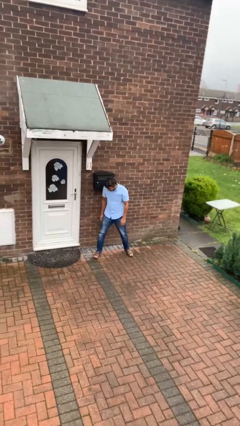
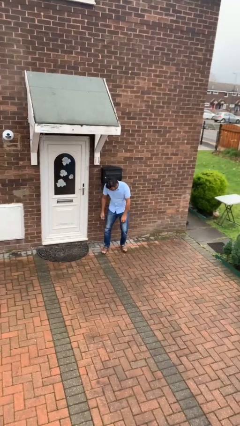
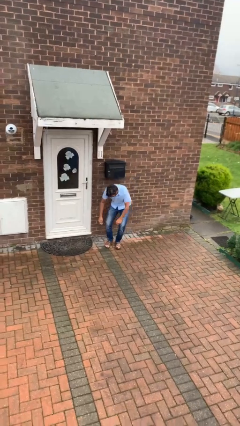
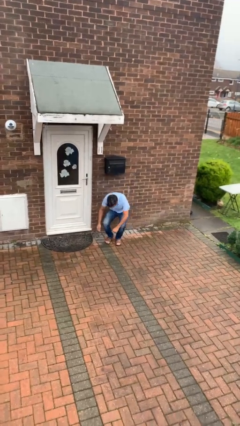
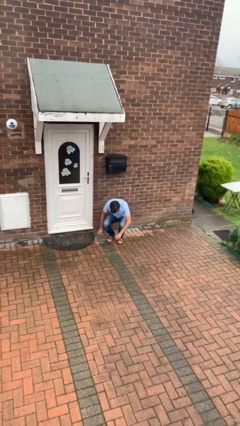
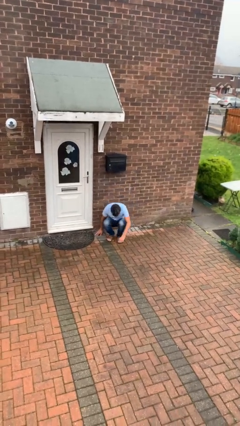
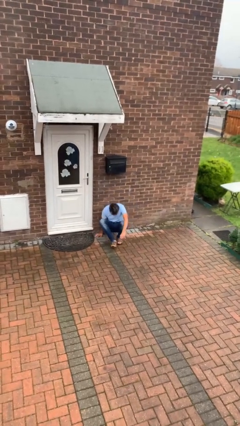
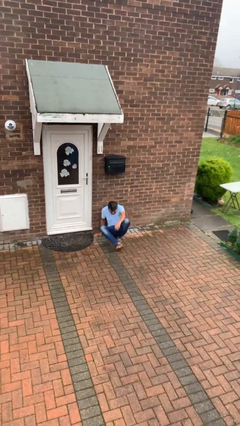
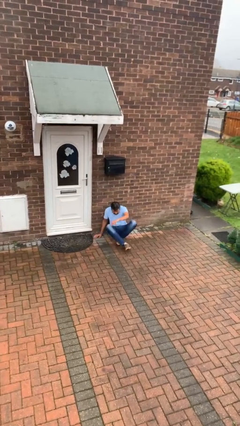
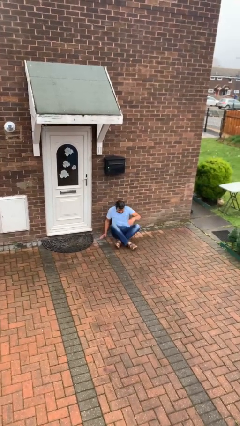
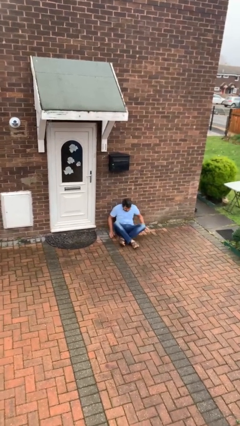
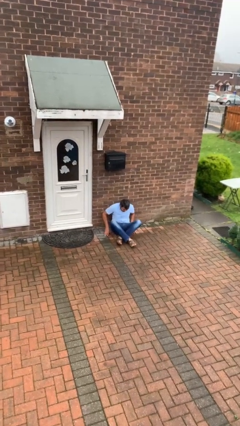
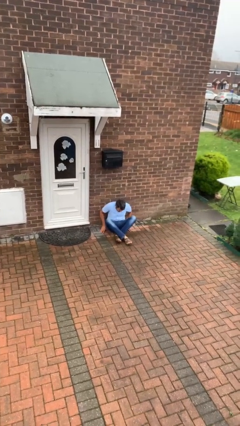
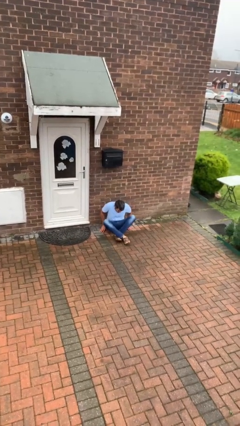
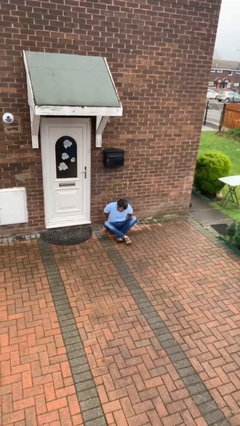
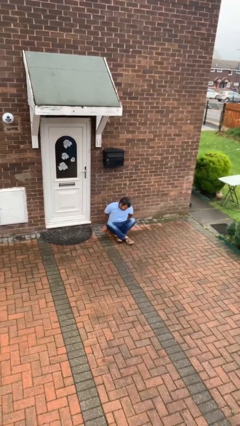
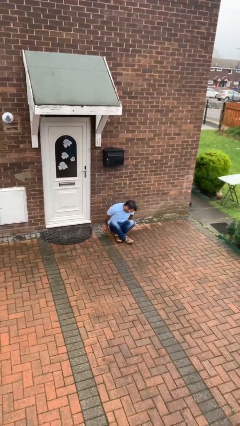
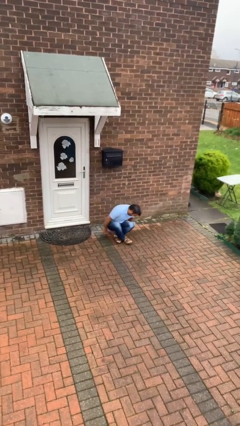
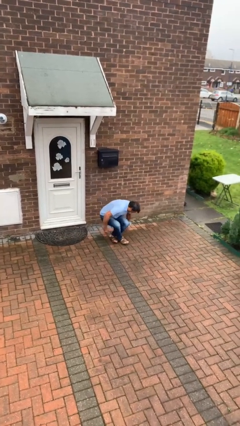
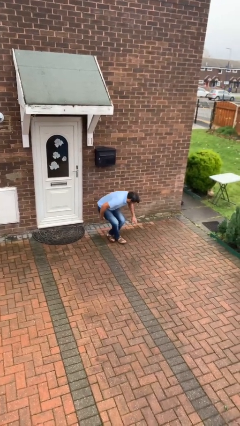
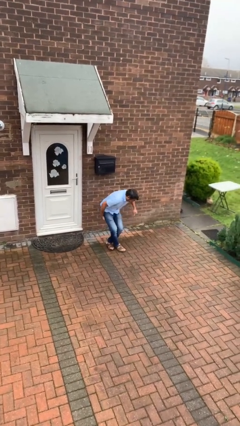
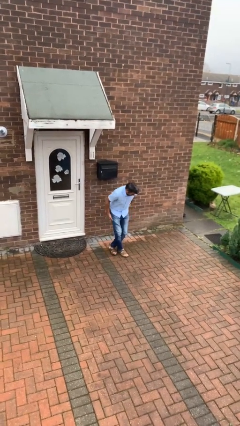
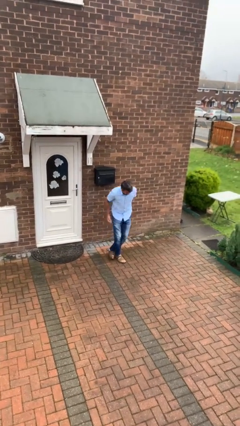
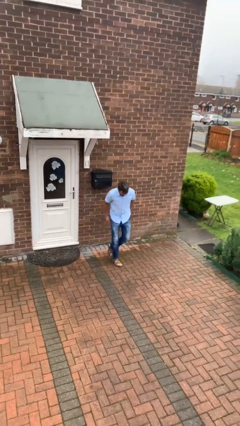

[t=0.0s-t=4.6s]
person sits down

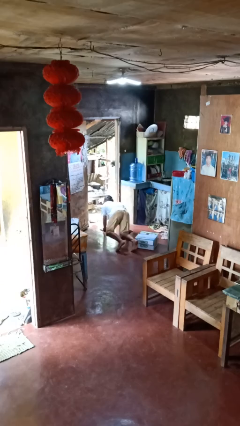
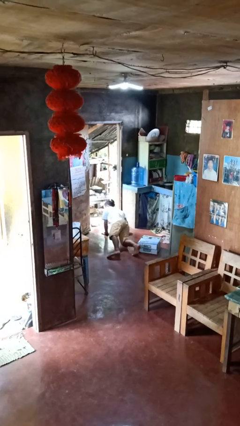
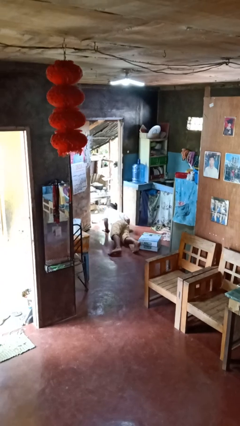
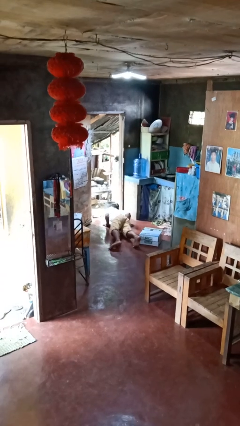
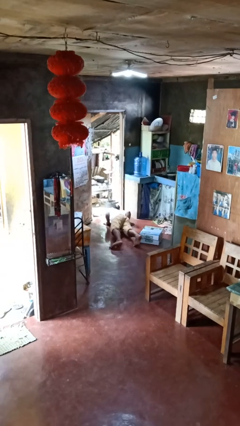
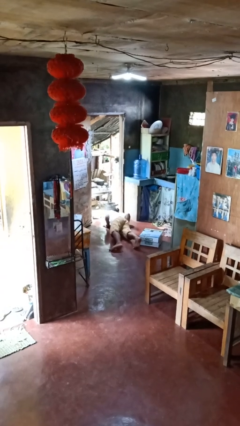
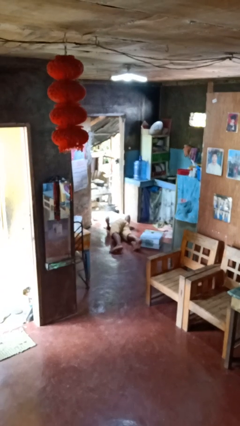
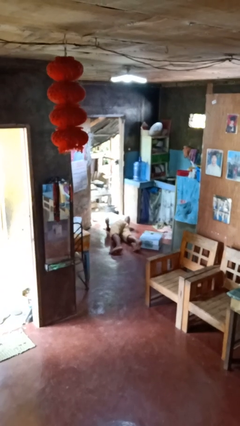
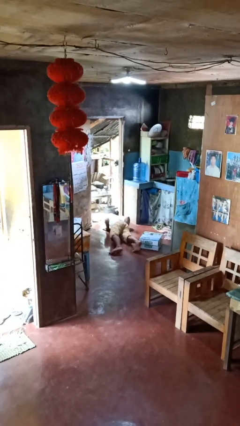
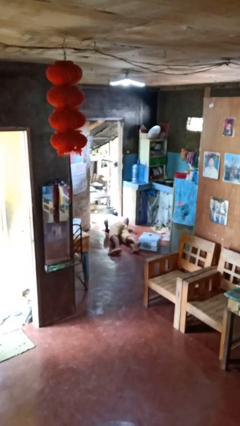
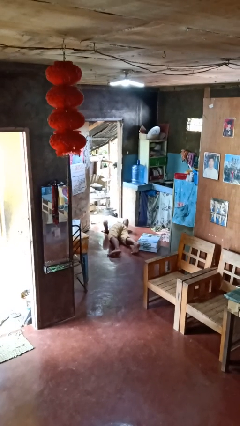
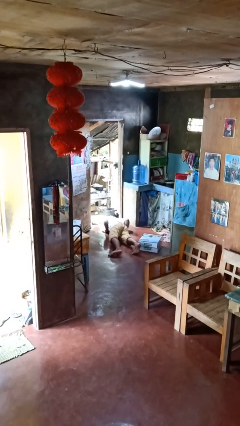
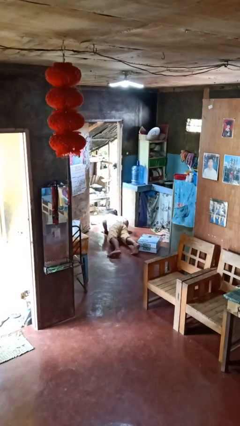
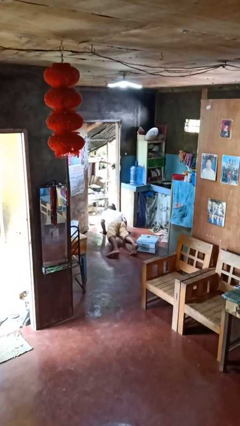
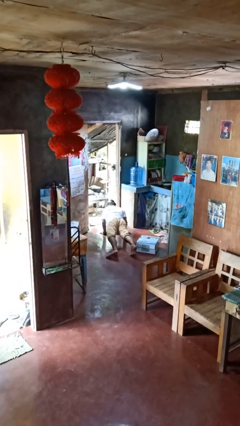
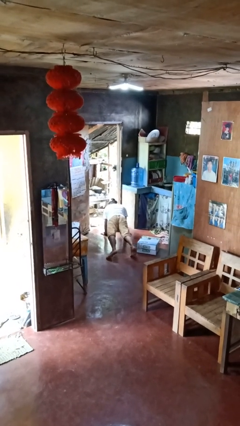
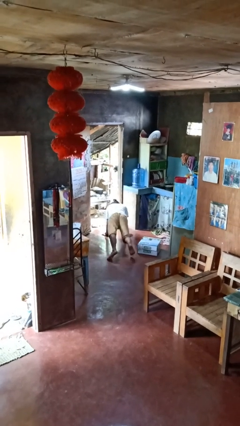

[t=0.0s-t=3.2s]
person lies down on floor

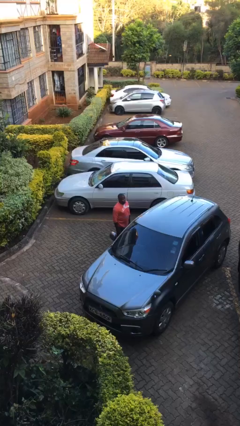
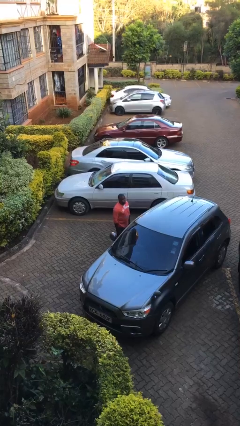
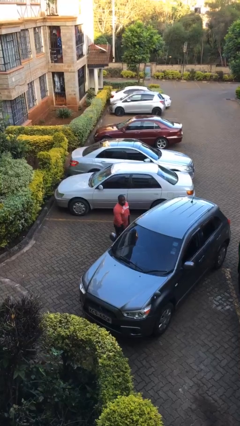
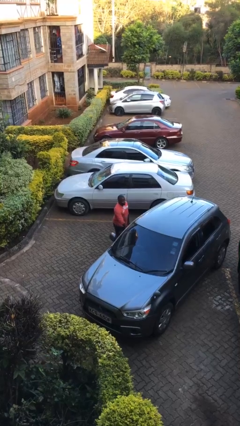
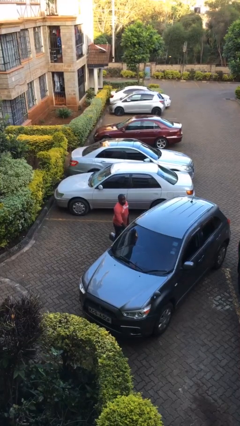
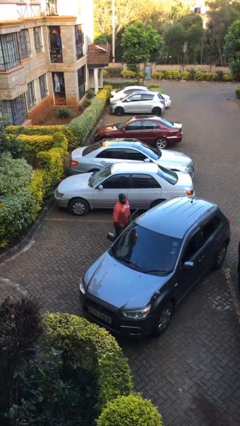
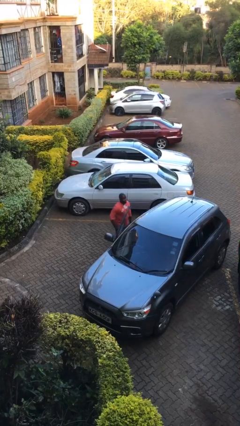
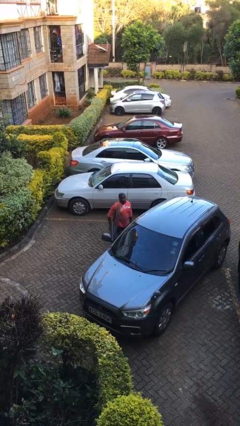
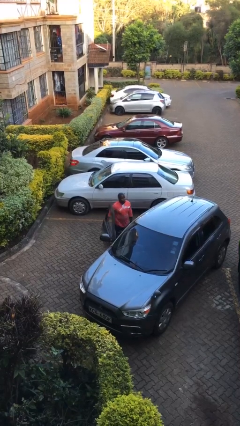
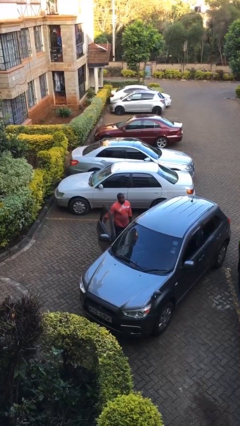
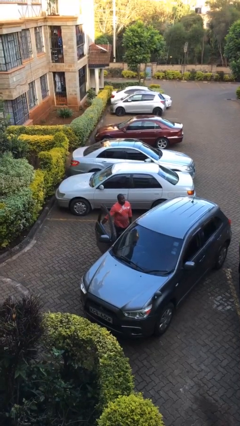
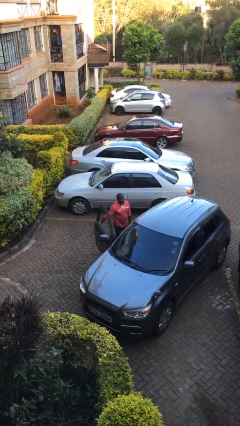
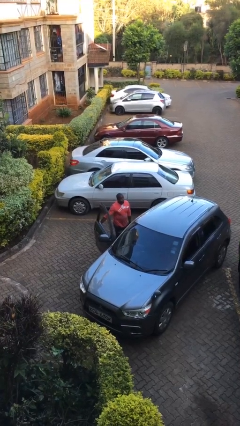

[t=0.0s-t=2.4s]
person opens car door

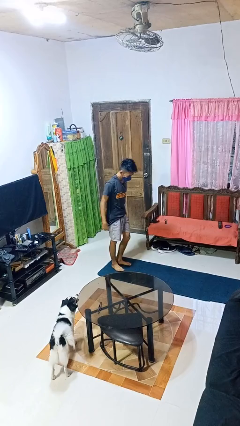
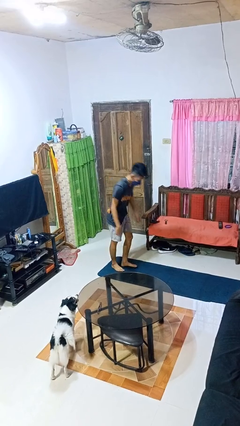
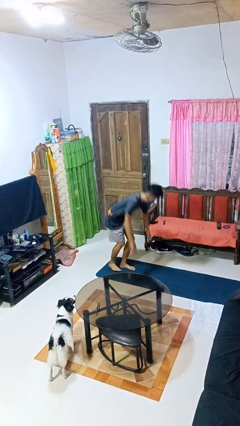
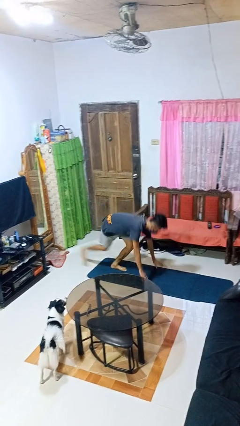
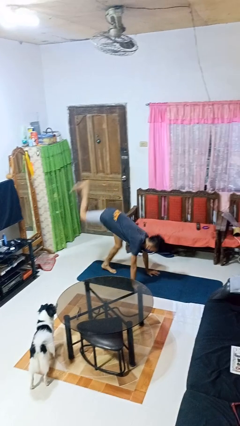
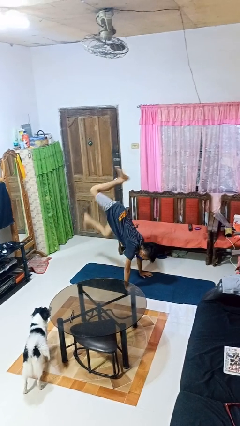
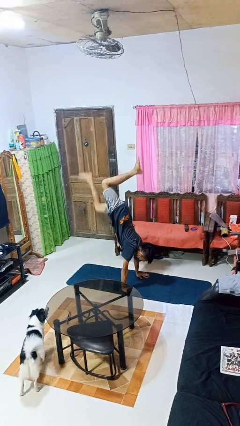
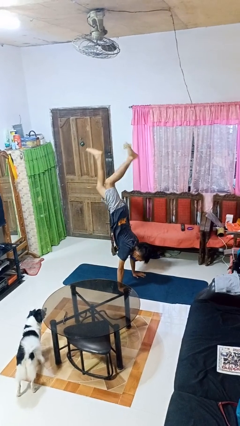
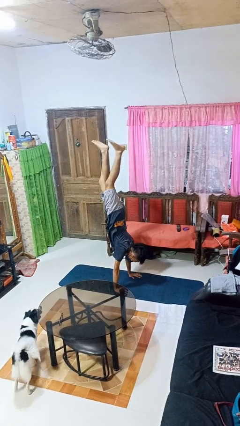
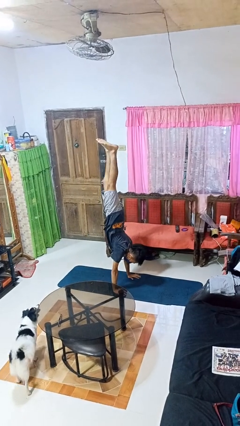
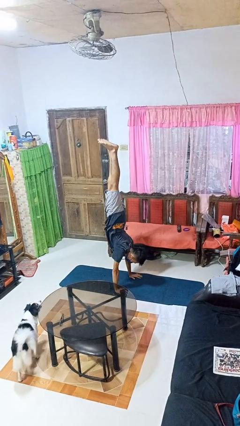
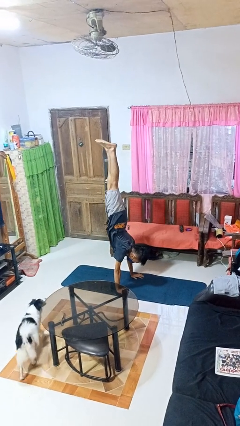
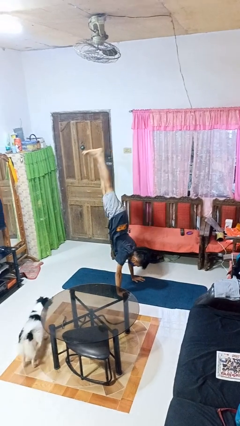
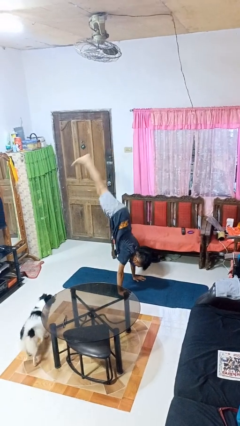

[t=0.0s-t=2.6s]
person handstand

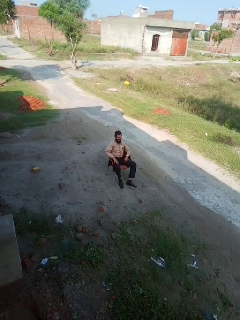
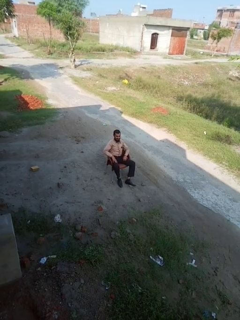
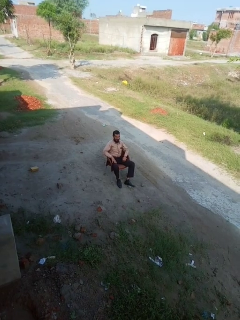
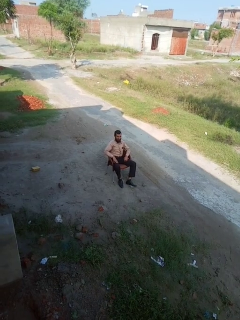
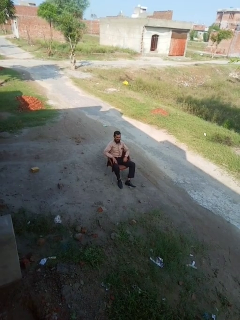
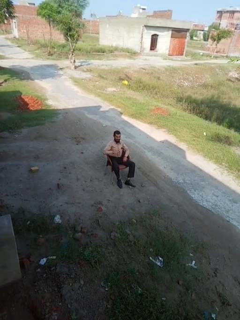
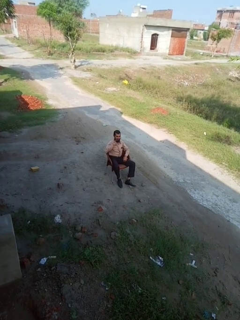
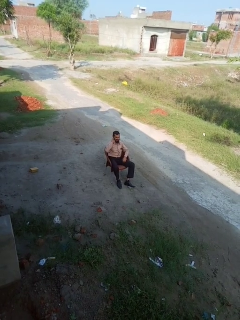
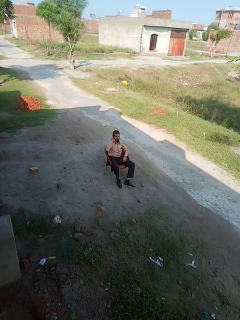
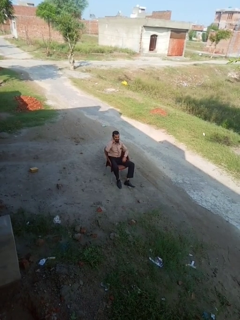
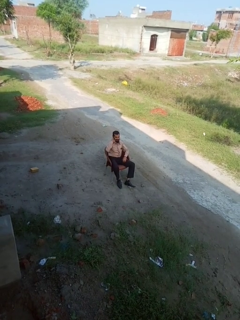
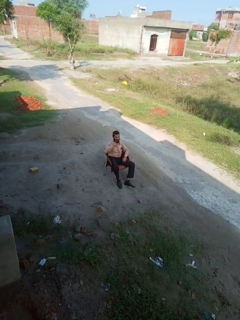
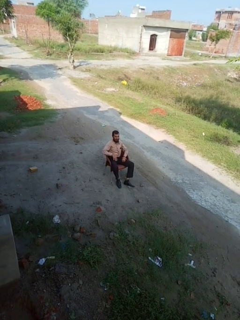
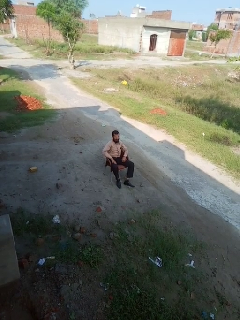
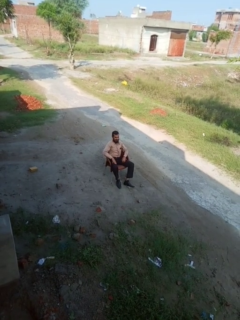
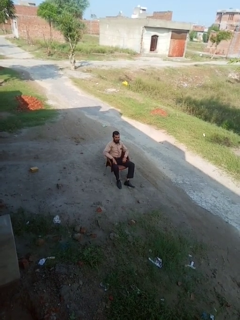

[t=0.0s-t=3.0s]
person gestures call me

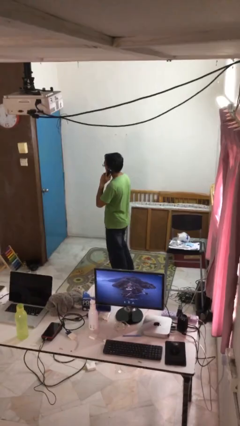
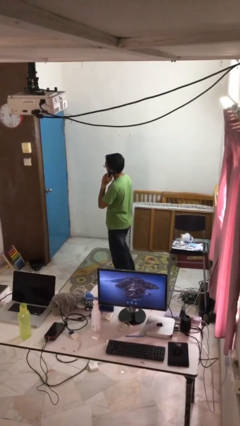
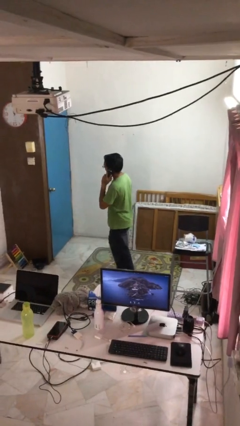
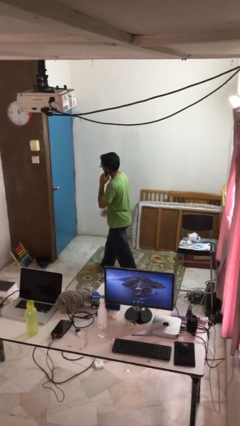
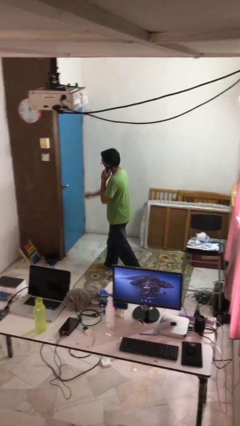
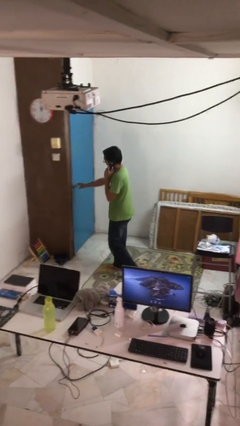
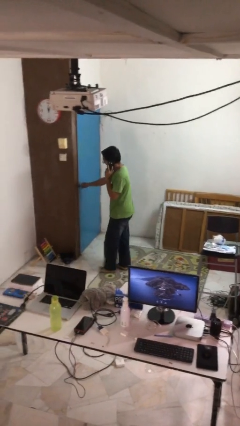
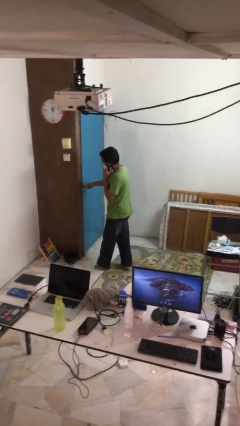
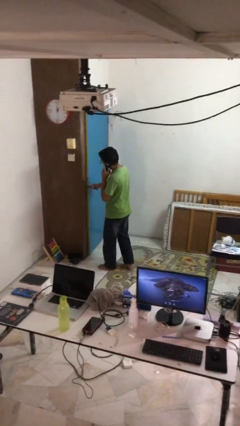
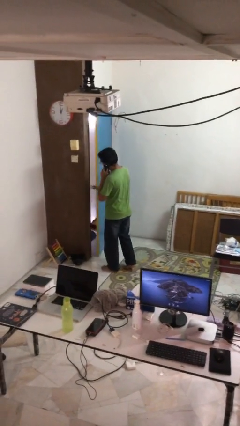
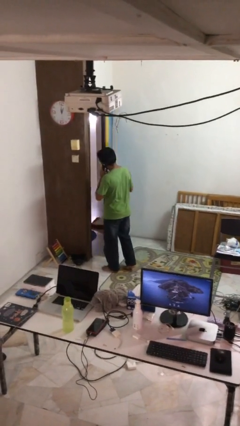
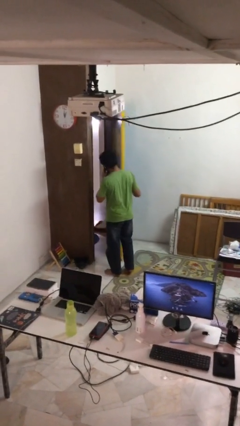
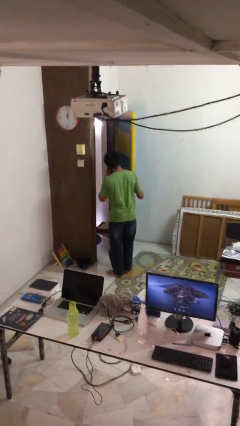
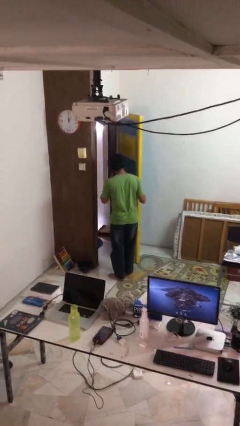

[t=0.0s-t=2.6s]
person opens facility door
